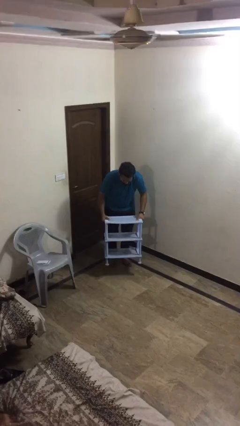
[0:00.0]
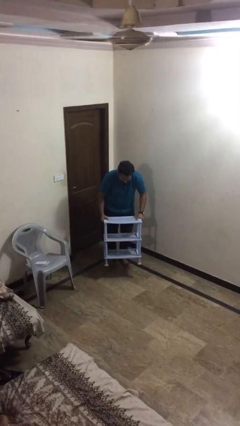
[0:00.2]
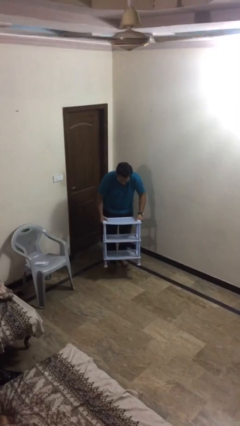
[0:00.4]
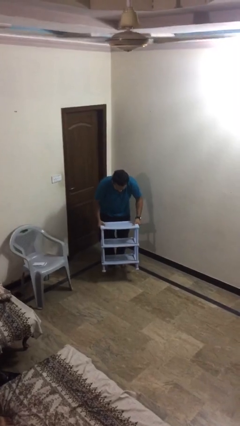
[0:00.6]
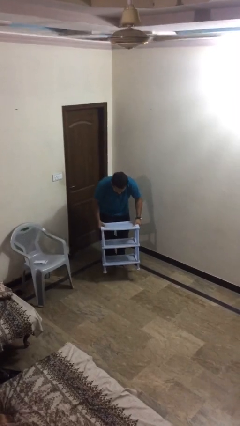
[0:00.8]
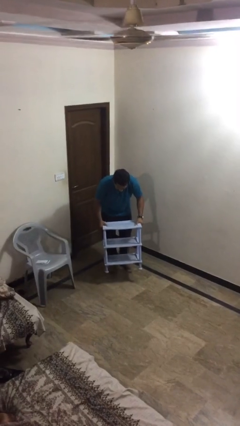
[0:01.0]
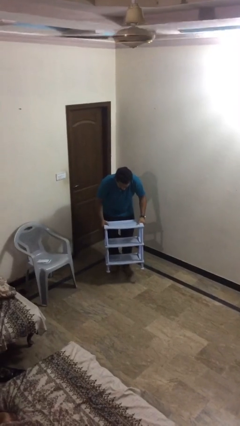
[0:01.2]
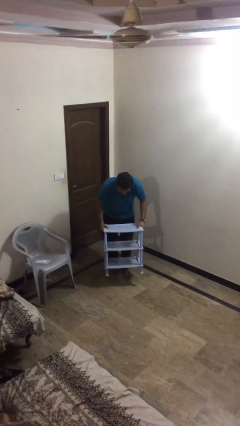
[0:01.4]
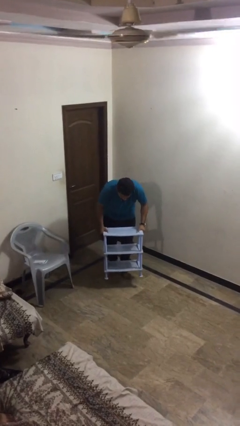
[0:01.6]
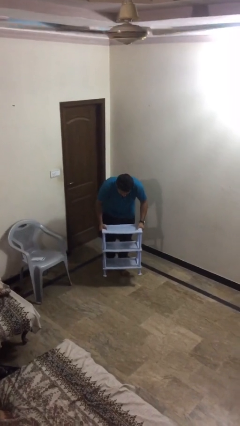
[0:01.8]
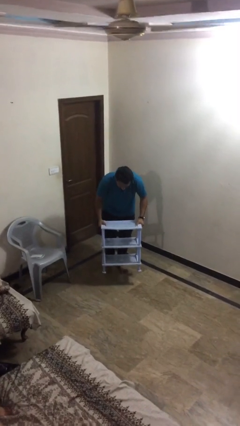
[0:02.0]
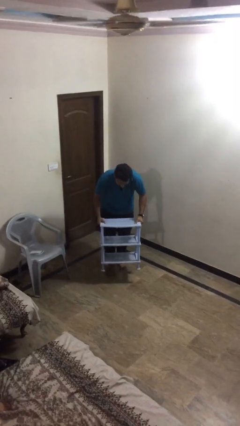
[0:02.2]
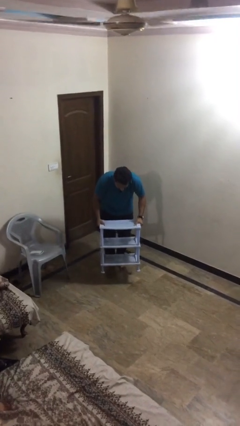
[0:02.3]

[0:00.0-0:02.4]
person carries heavy object

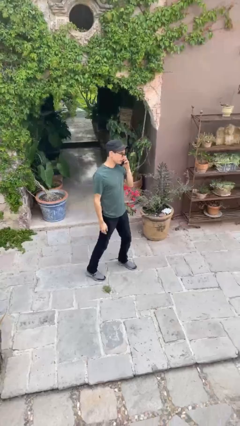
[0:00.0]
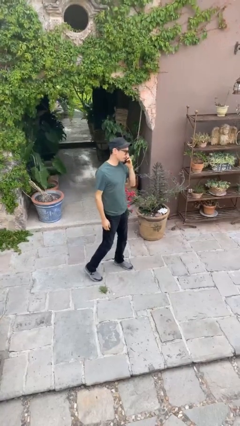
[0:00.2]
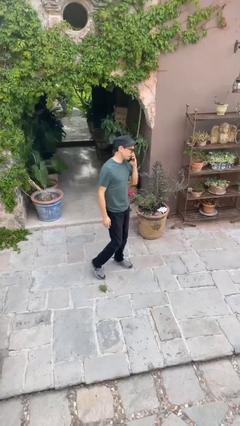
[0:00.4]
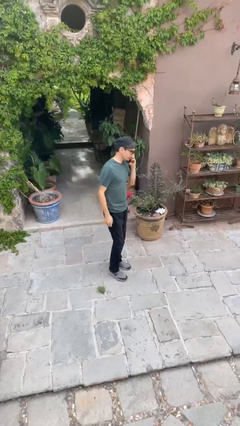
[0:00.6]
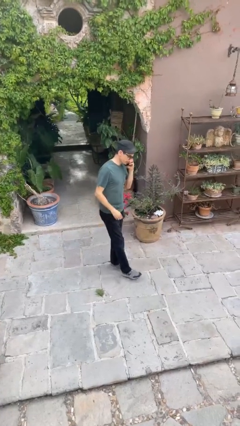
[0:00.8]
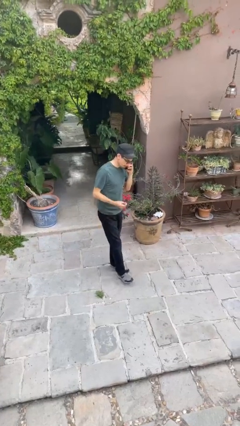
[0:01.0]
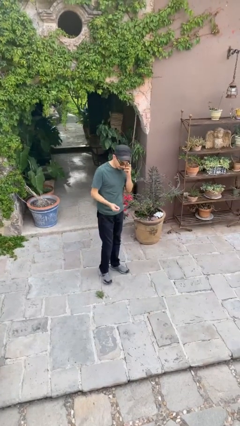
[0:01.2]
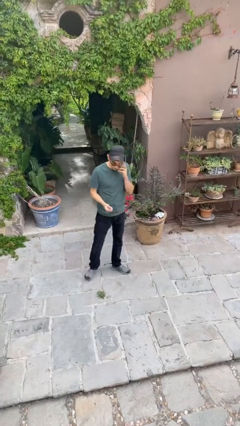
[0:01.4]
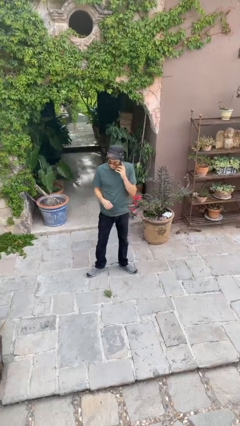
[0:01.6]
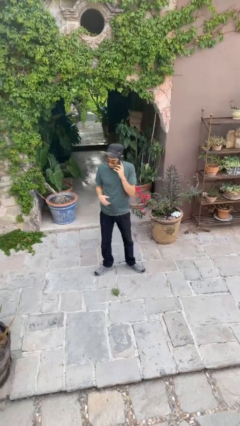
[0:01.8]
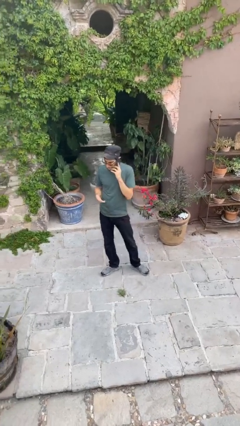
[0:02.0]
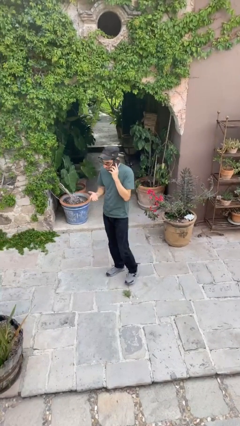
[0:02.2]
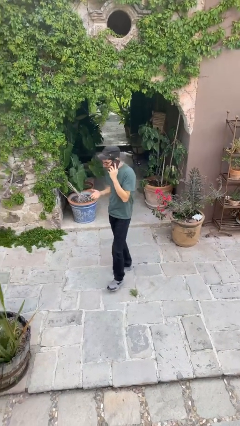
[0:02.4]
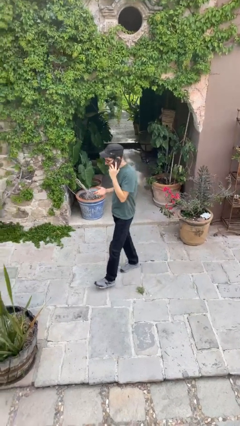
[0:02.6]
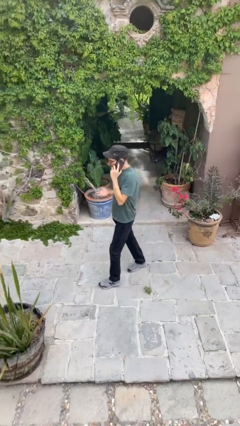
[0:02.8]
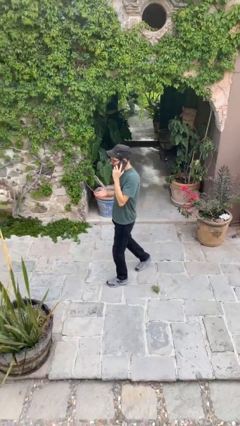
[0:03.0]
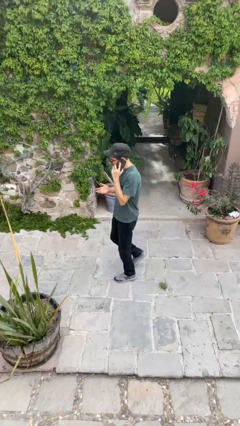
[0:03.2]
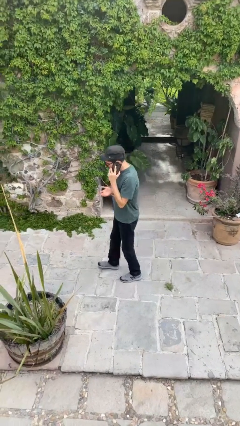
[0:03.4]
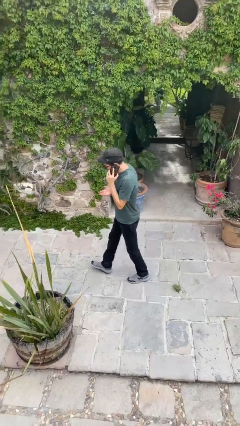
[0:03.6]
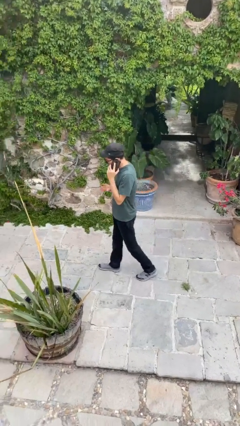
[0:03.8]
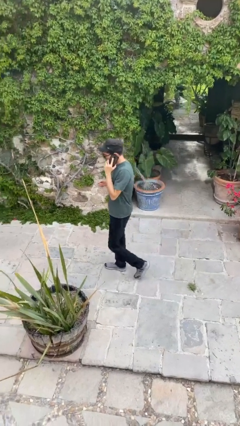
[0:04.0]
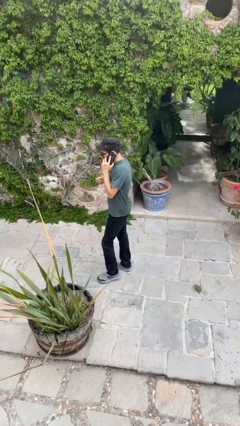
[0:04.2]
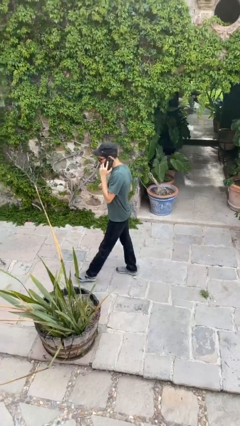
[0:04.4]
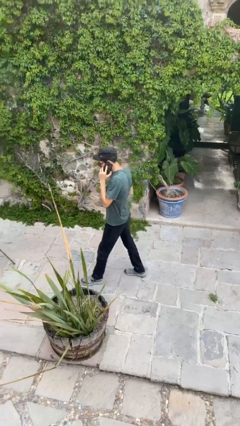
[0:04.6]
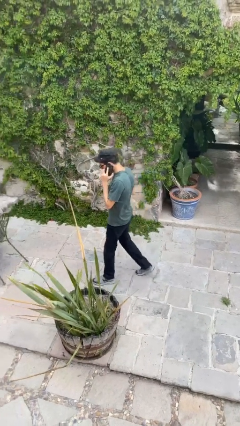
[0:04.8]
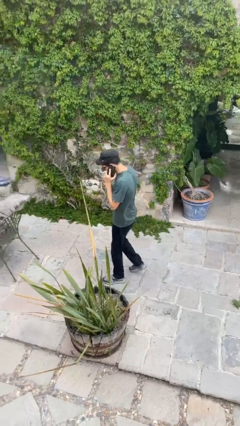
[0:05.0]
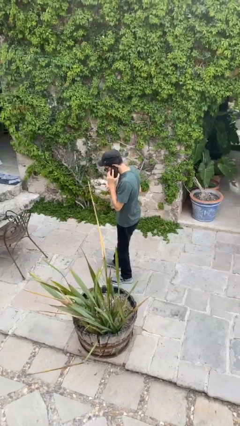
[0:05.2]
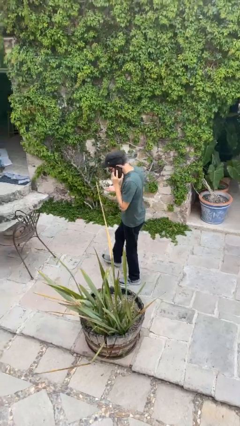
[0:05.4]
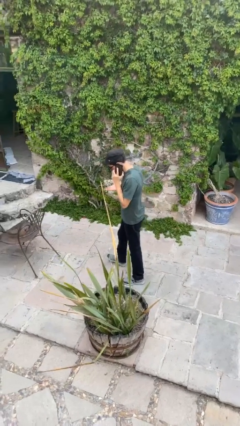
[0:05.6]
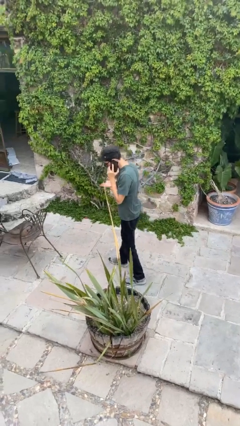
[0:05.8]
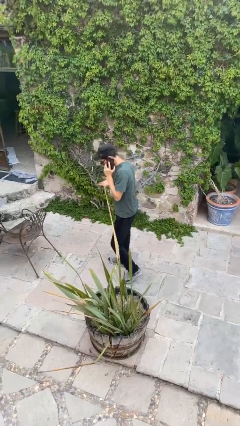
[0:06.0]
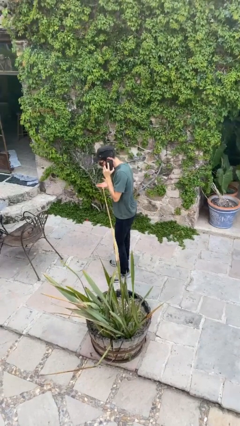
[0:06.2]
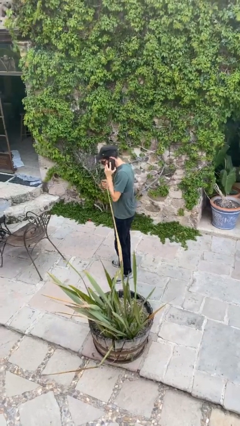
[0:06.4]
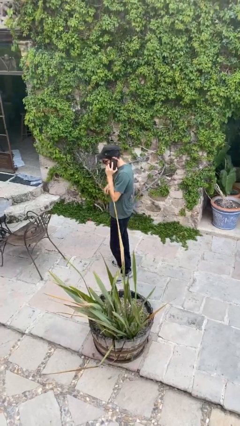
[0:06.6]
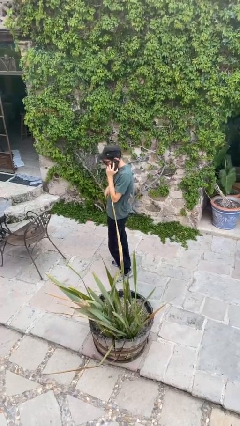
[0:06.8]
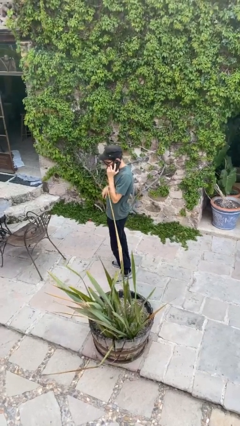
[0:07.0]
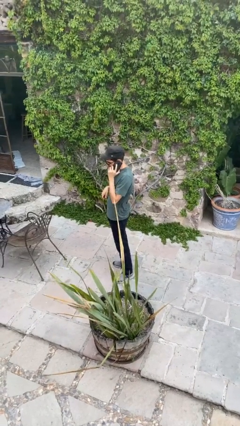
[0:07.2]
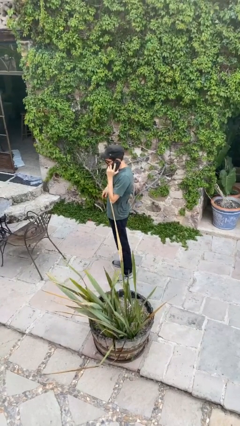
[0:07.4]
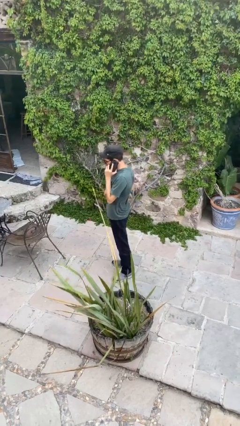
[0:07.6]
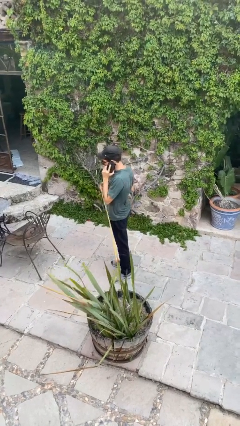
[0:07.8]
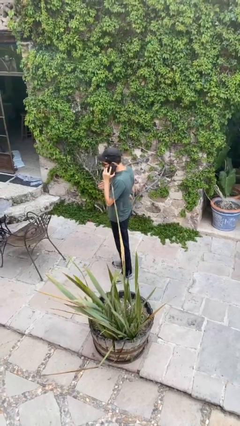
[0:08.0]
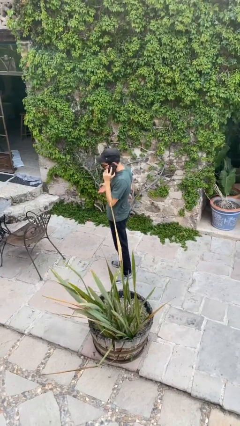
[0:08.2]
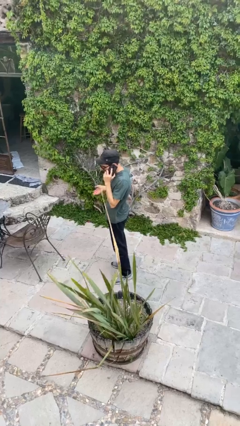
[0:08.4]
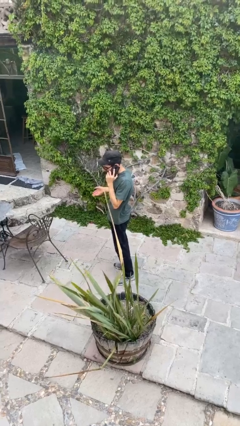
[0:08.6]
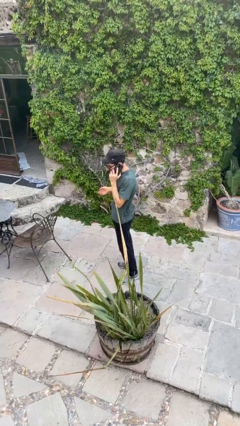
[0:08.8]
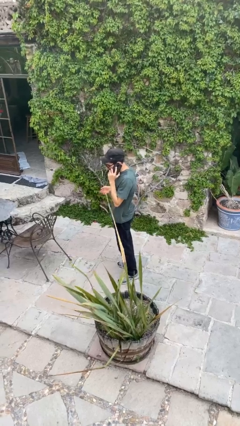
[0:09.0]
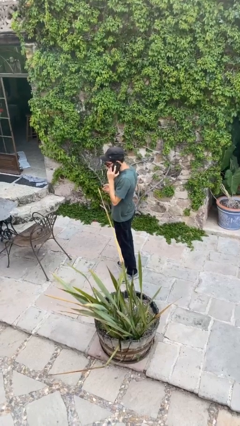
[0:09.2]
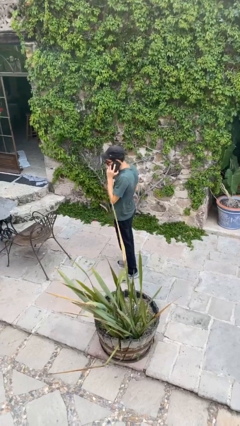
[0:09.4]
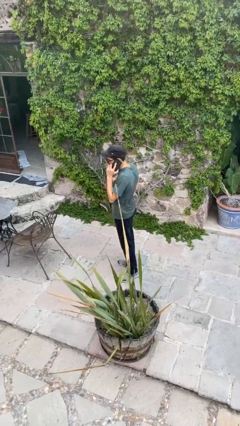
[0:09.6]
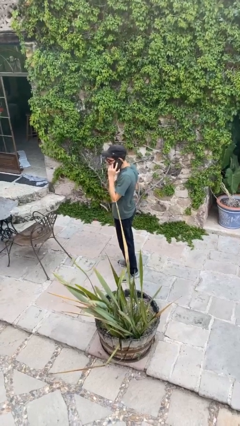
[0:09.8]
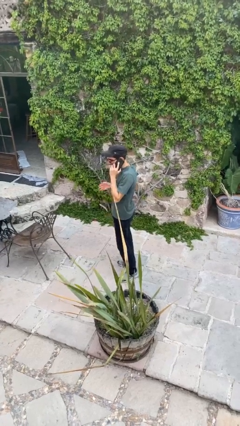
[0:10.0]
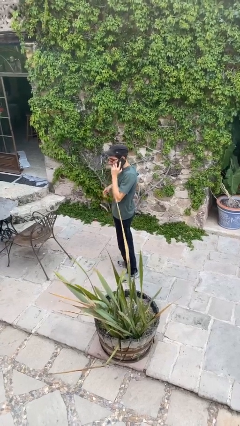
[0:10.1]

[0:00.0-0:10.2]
person talks on phone

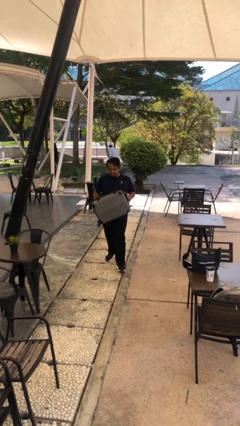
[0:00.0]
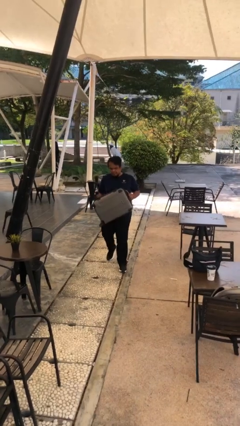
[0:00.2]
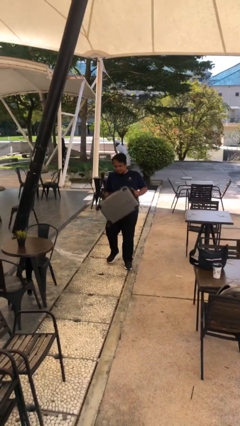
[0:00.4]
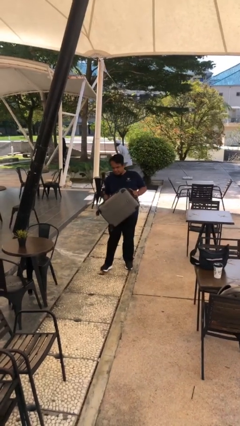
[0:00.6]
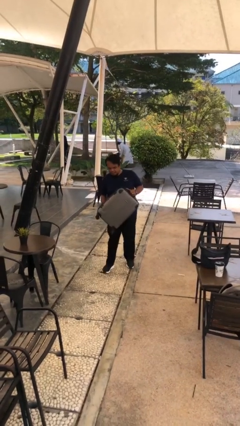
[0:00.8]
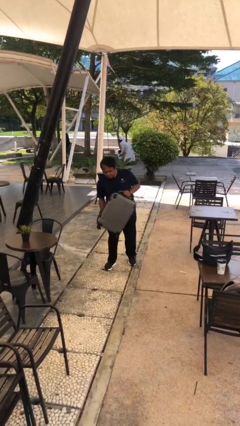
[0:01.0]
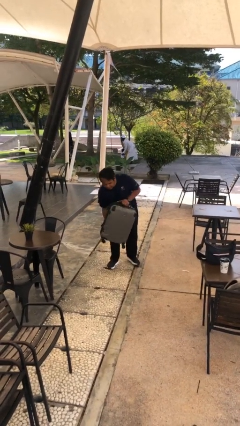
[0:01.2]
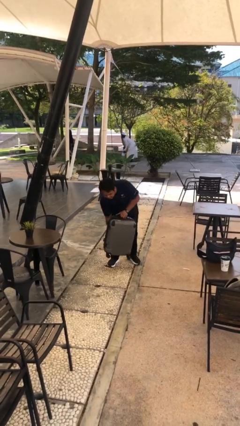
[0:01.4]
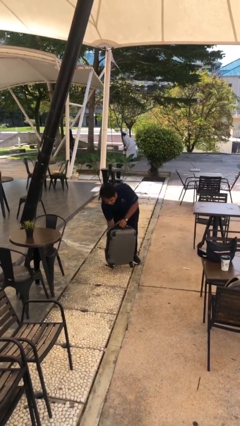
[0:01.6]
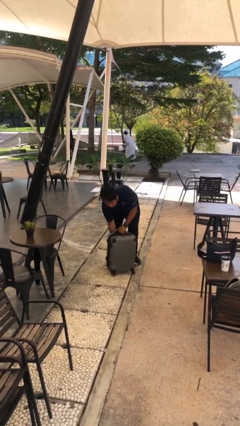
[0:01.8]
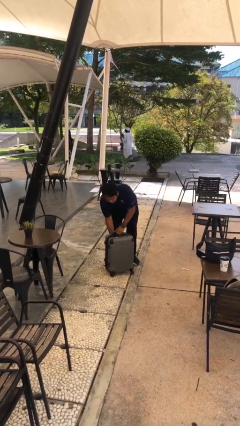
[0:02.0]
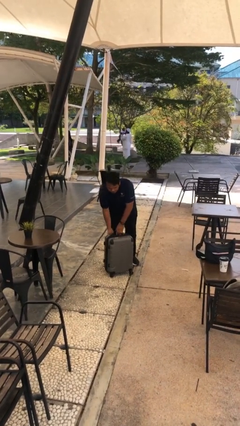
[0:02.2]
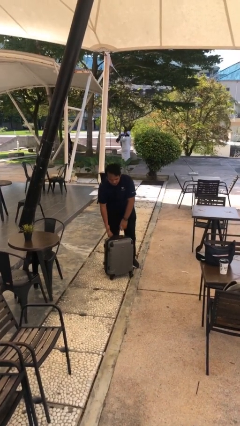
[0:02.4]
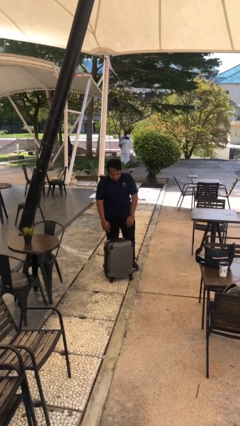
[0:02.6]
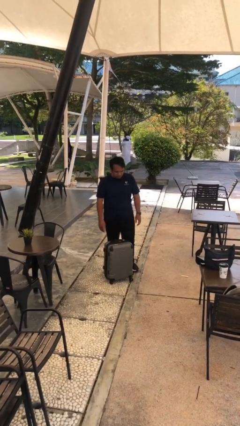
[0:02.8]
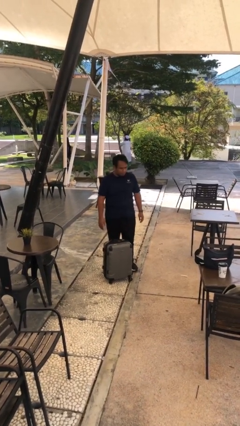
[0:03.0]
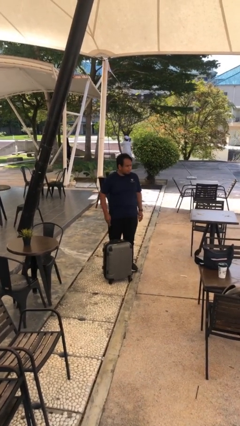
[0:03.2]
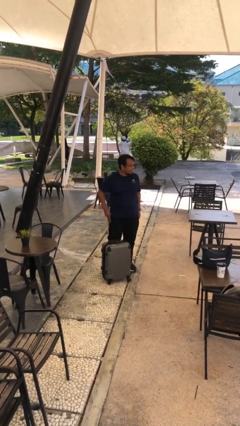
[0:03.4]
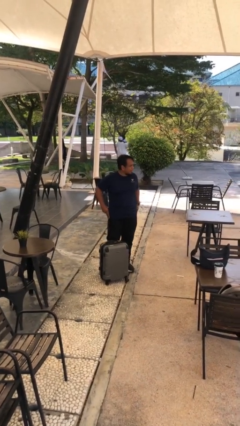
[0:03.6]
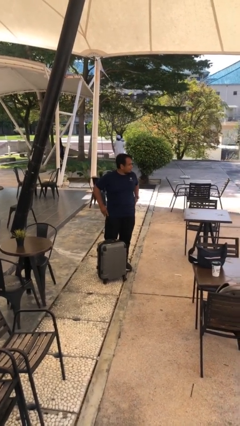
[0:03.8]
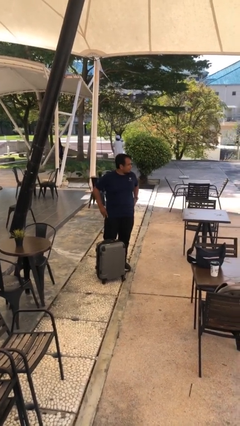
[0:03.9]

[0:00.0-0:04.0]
person puts down object on floor

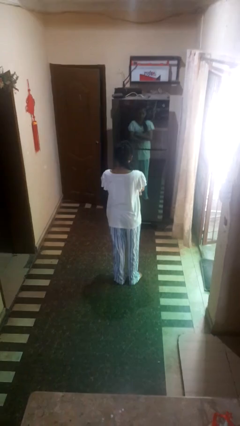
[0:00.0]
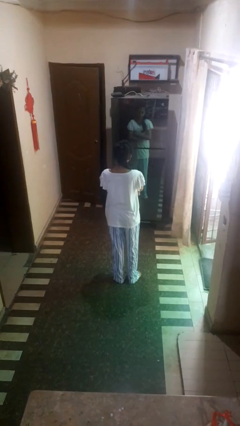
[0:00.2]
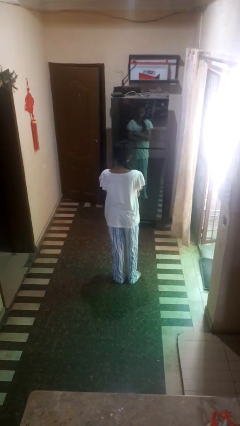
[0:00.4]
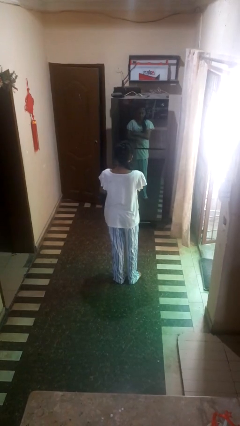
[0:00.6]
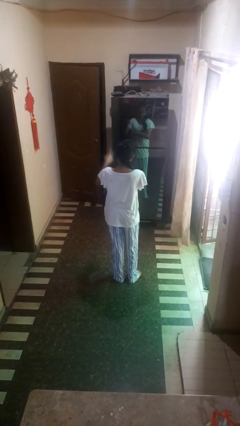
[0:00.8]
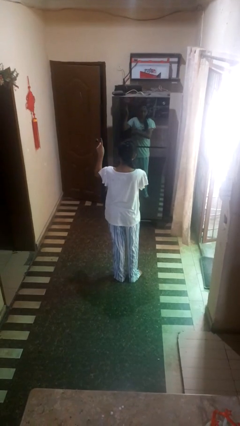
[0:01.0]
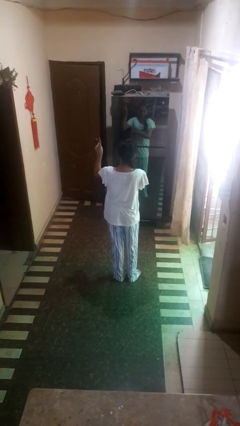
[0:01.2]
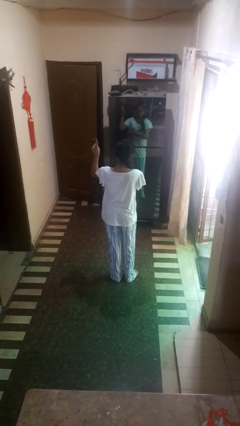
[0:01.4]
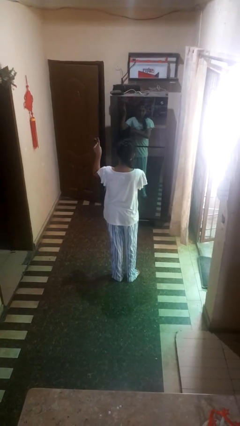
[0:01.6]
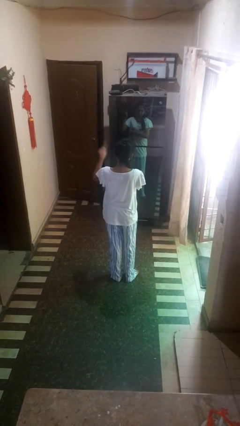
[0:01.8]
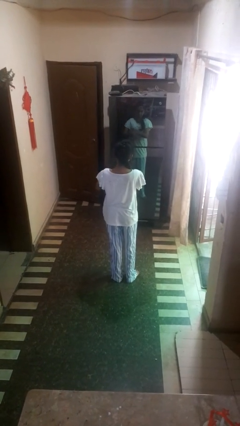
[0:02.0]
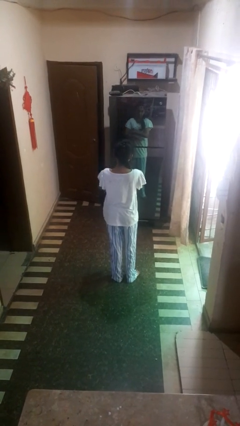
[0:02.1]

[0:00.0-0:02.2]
person gestures number one
